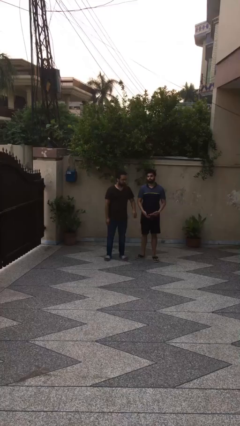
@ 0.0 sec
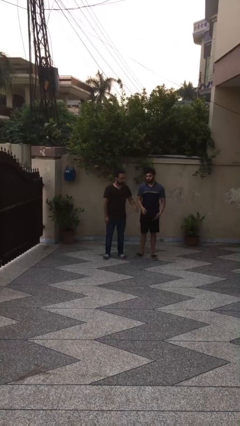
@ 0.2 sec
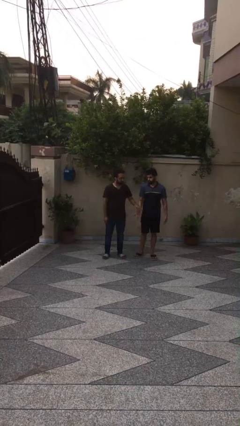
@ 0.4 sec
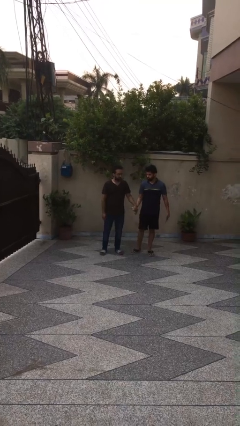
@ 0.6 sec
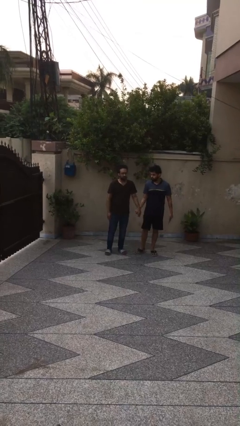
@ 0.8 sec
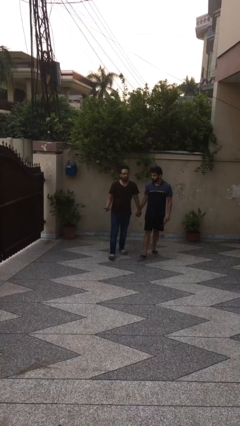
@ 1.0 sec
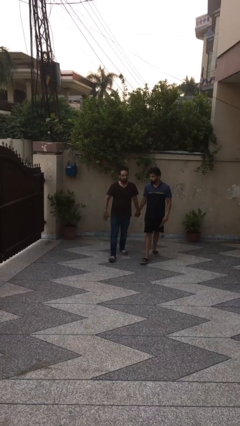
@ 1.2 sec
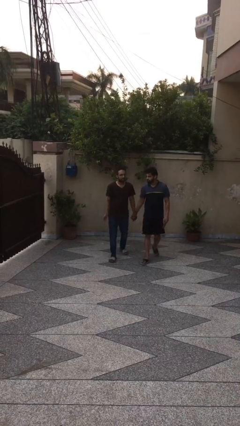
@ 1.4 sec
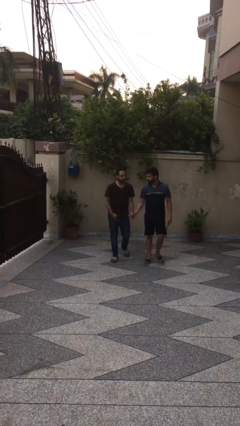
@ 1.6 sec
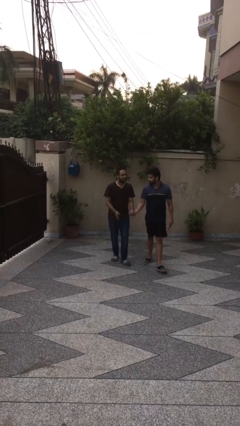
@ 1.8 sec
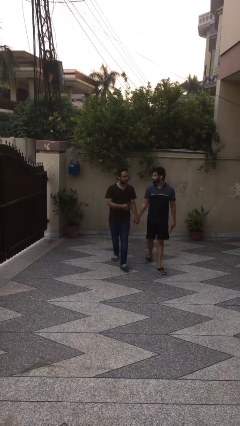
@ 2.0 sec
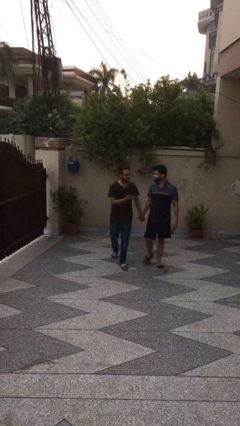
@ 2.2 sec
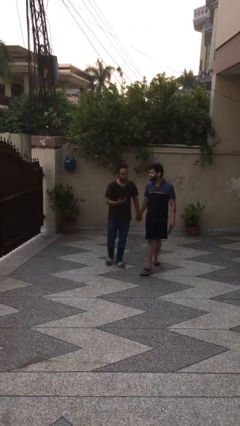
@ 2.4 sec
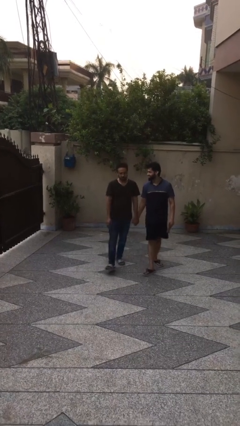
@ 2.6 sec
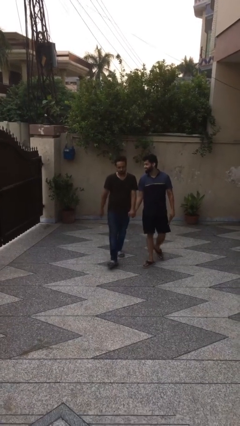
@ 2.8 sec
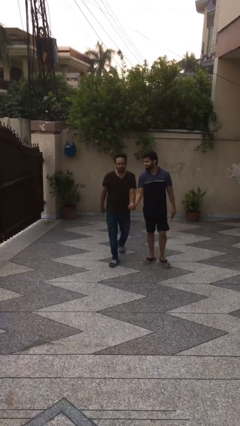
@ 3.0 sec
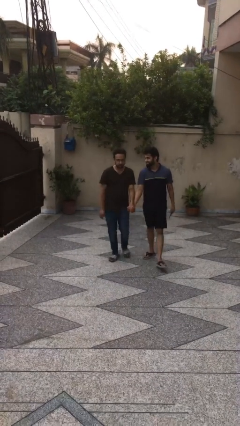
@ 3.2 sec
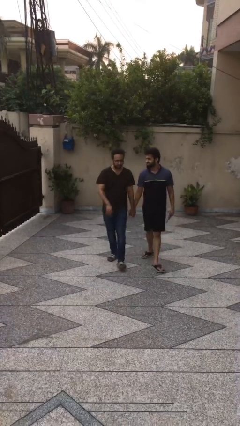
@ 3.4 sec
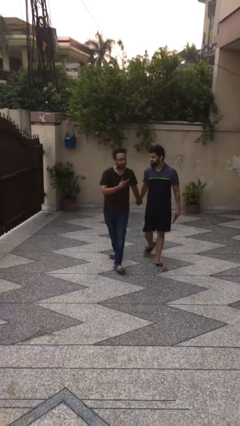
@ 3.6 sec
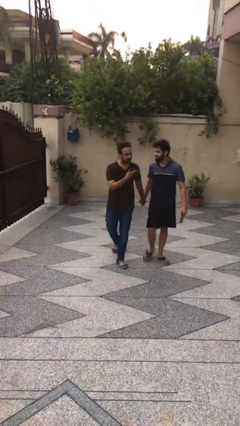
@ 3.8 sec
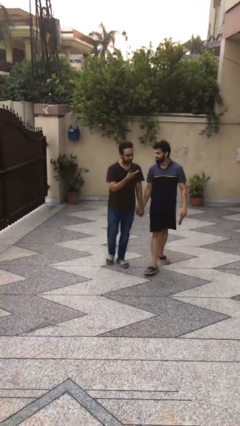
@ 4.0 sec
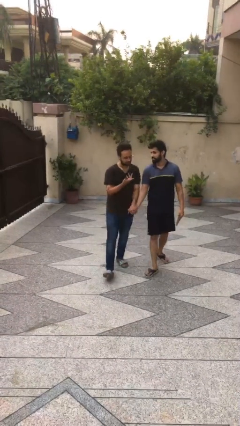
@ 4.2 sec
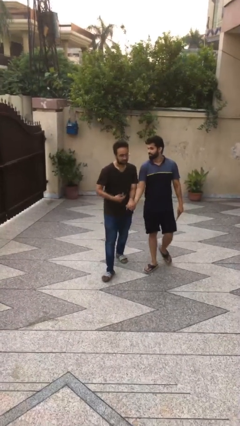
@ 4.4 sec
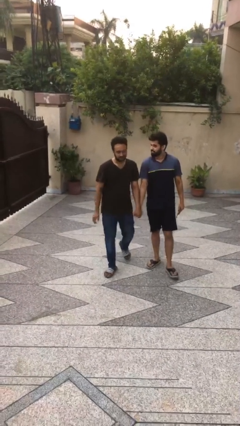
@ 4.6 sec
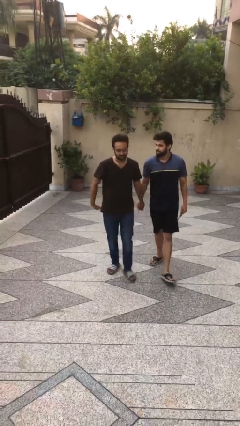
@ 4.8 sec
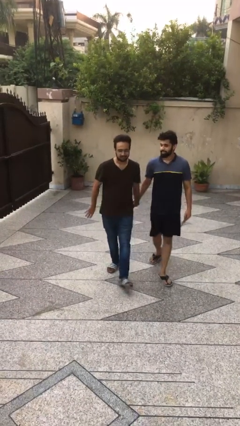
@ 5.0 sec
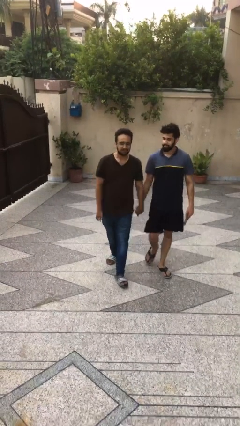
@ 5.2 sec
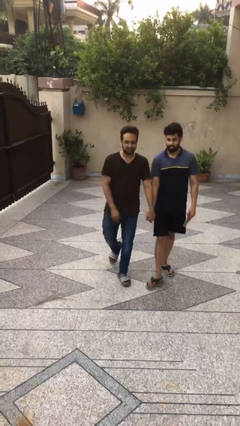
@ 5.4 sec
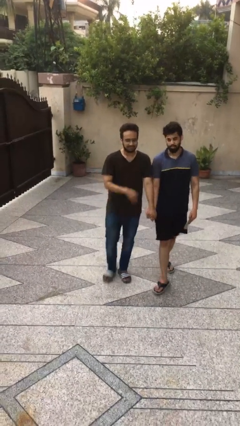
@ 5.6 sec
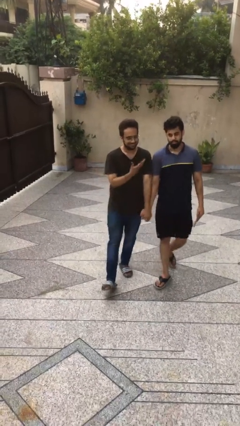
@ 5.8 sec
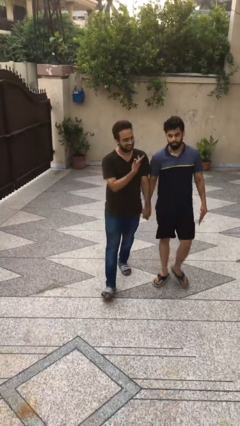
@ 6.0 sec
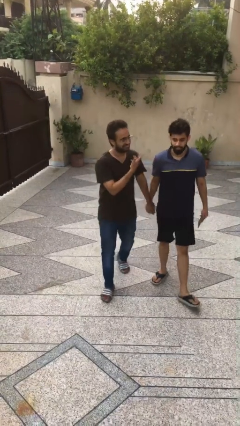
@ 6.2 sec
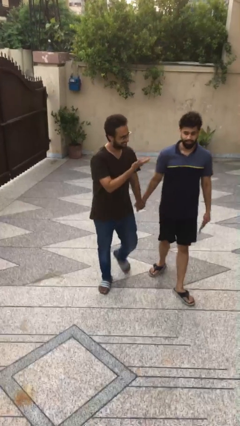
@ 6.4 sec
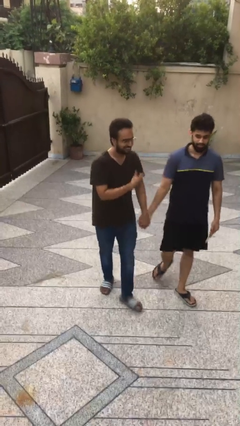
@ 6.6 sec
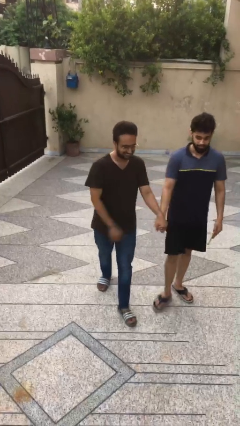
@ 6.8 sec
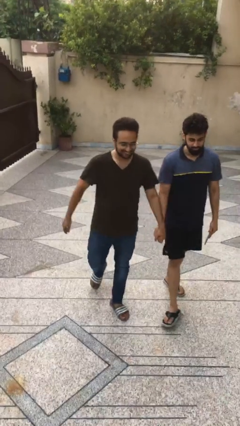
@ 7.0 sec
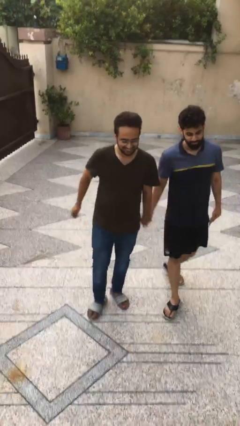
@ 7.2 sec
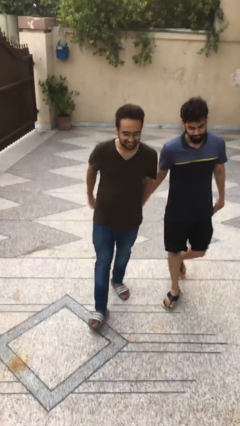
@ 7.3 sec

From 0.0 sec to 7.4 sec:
person holds hand

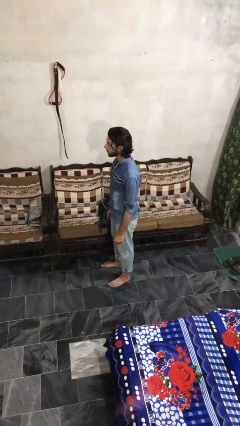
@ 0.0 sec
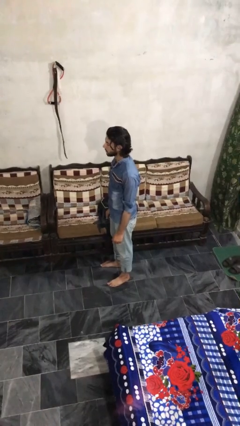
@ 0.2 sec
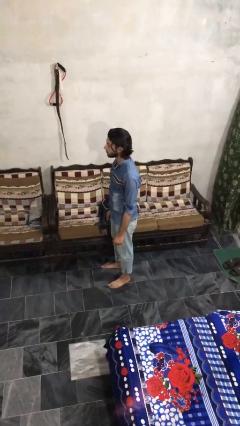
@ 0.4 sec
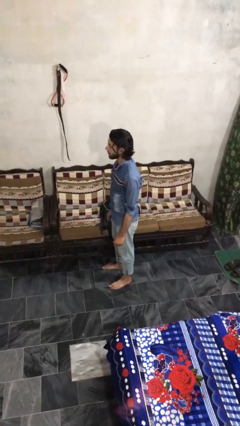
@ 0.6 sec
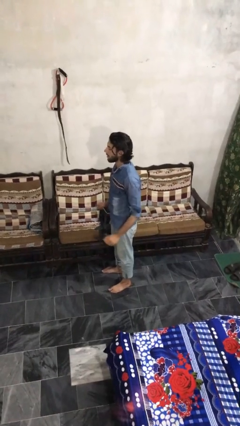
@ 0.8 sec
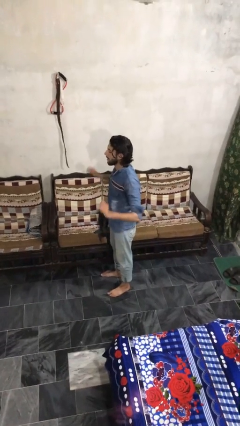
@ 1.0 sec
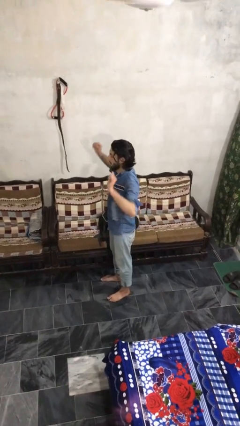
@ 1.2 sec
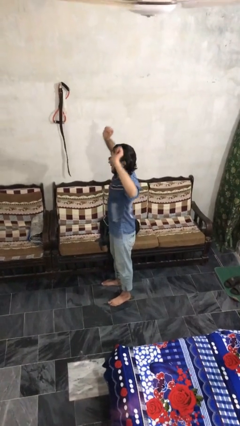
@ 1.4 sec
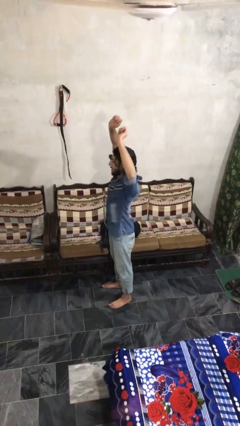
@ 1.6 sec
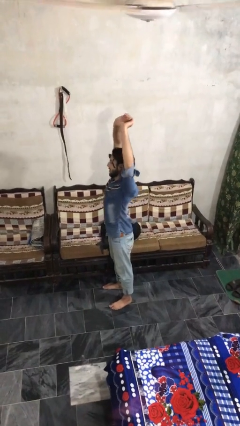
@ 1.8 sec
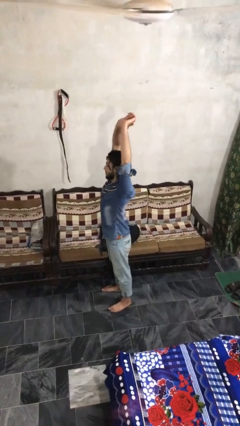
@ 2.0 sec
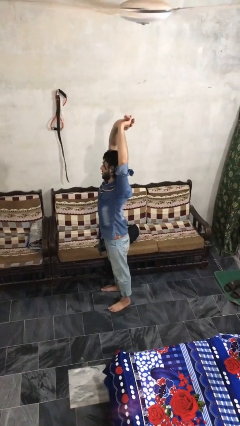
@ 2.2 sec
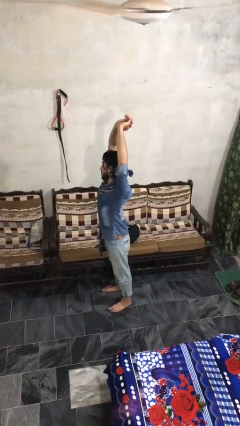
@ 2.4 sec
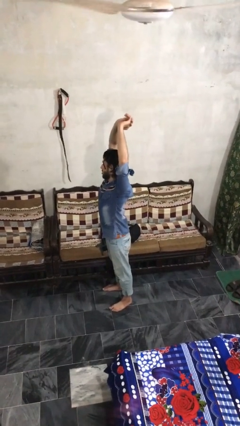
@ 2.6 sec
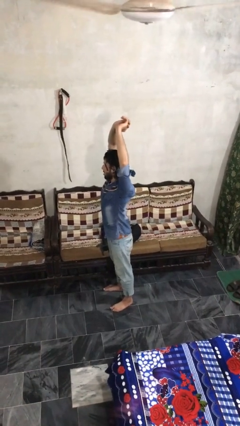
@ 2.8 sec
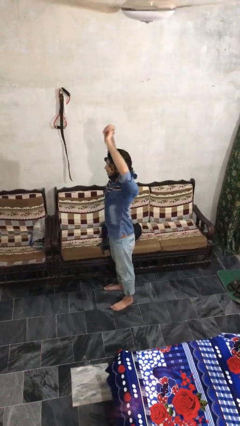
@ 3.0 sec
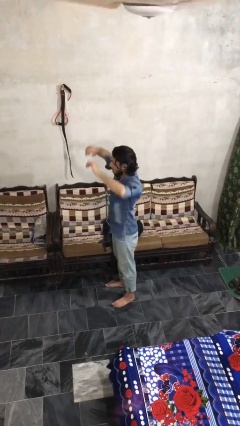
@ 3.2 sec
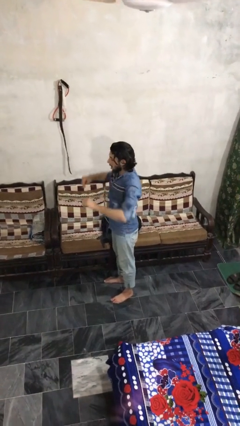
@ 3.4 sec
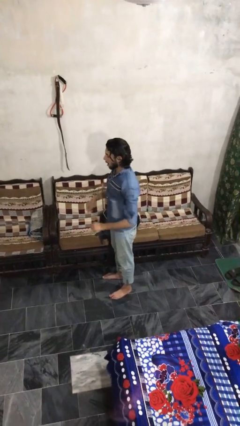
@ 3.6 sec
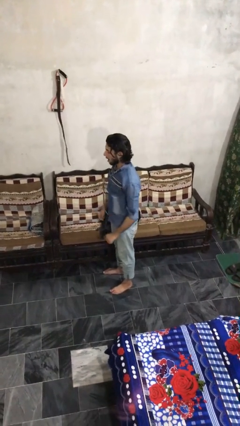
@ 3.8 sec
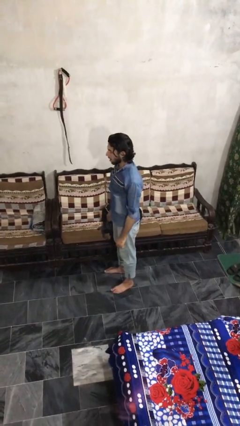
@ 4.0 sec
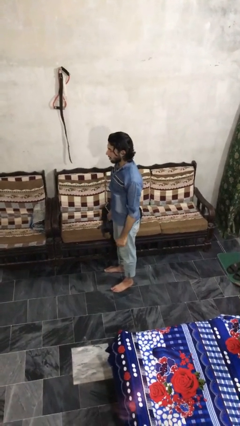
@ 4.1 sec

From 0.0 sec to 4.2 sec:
person stretches arms over head

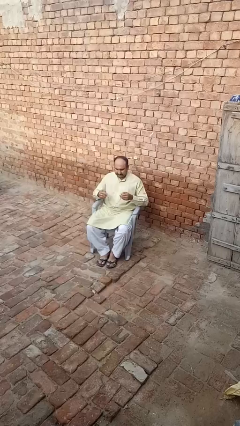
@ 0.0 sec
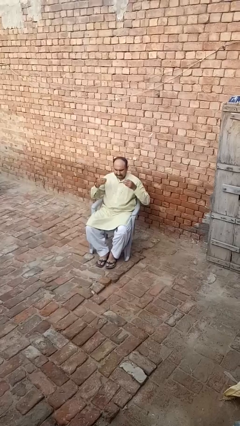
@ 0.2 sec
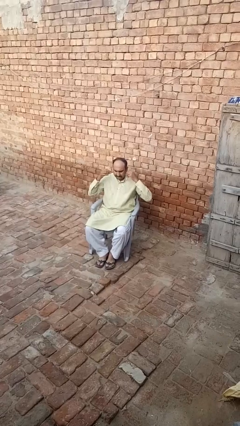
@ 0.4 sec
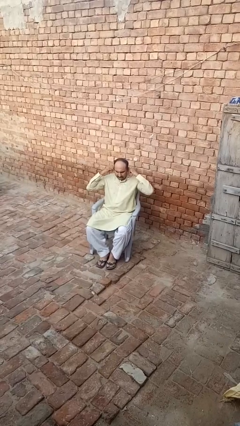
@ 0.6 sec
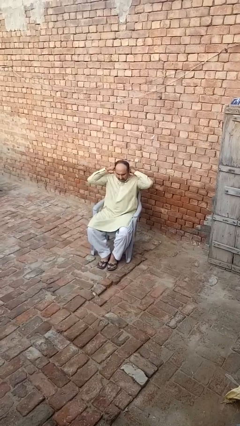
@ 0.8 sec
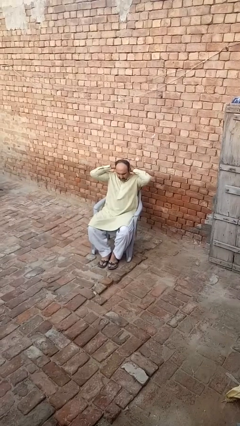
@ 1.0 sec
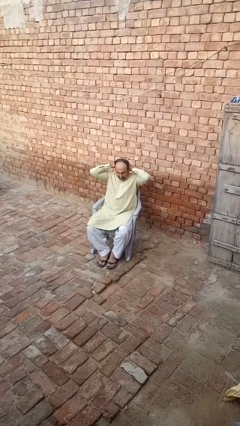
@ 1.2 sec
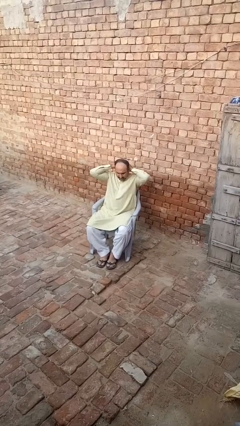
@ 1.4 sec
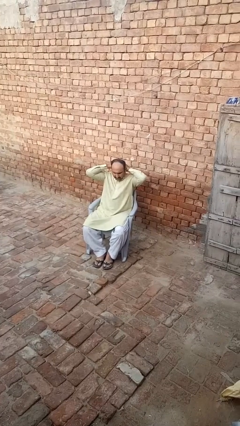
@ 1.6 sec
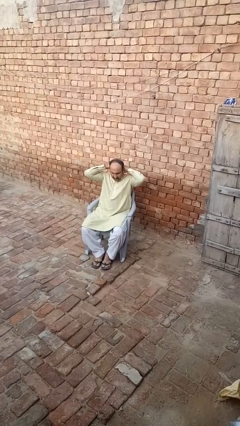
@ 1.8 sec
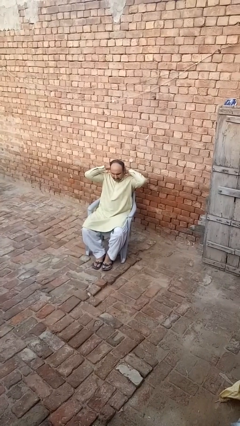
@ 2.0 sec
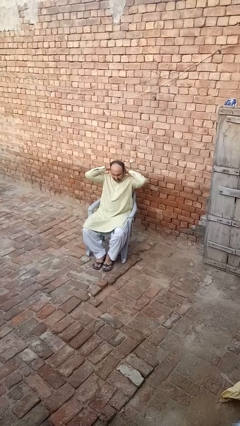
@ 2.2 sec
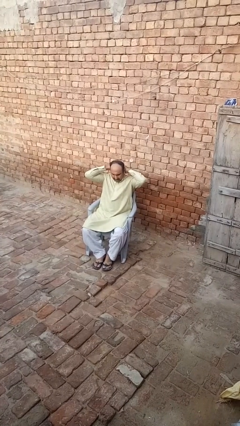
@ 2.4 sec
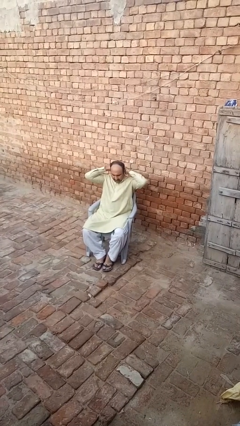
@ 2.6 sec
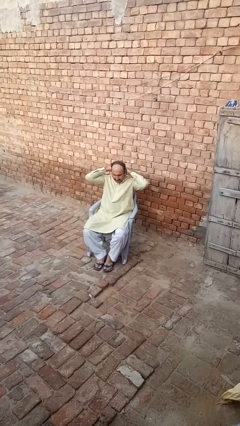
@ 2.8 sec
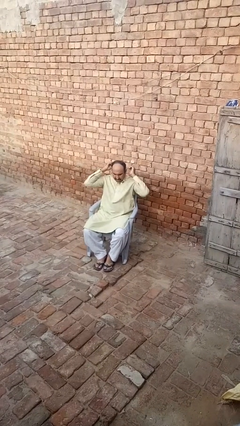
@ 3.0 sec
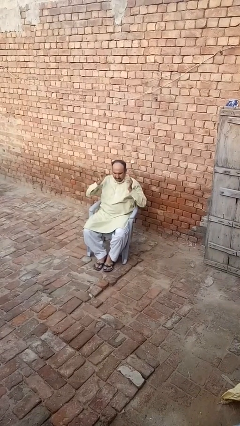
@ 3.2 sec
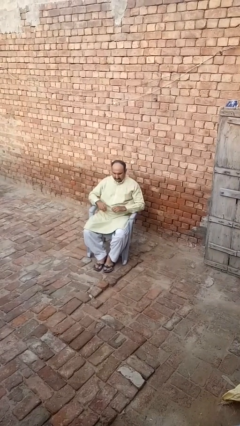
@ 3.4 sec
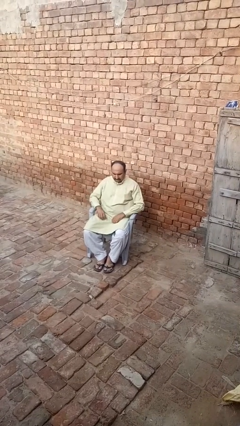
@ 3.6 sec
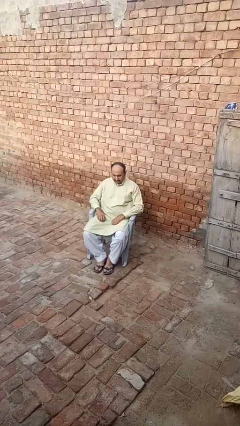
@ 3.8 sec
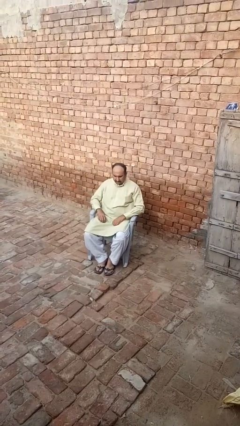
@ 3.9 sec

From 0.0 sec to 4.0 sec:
person puts on necklace

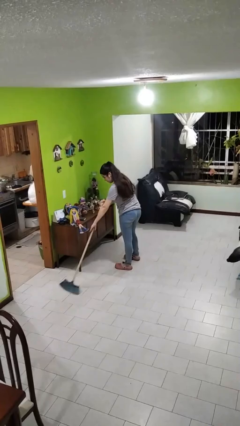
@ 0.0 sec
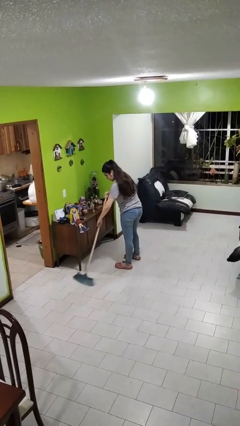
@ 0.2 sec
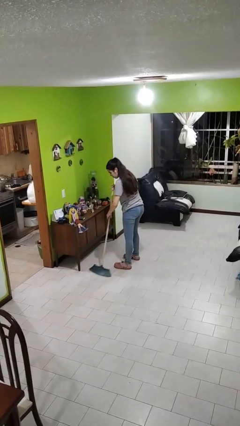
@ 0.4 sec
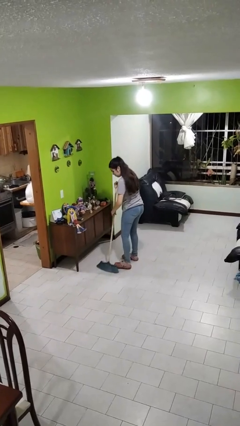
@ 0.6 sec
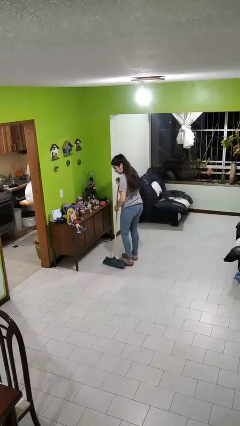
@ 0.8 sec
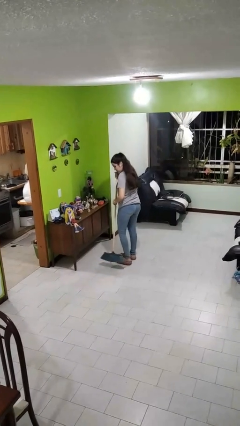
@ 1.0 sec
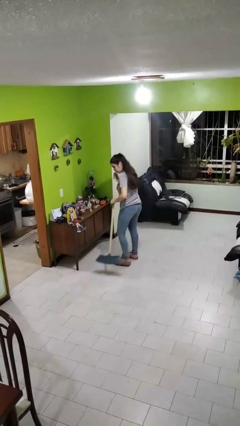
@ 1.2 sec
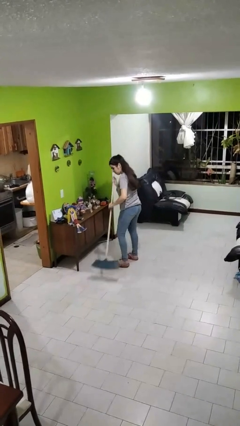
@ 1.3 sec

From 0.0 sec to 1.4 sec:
person sweeps floor

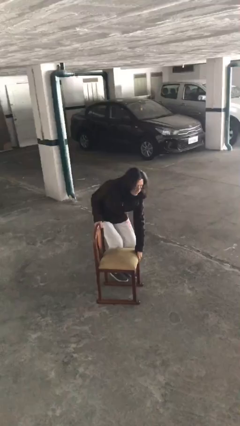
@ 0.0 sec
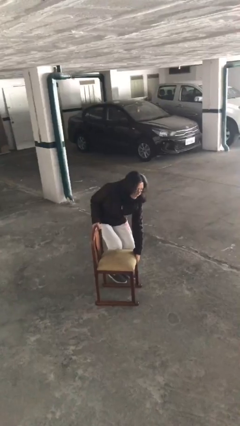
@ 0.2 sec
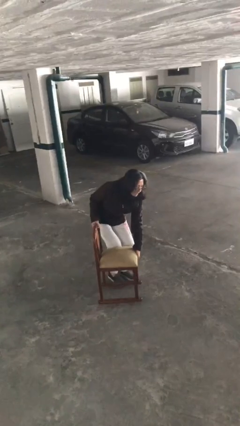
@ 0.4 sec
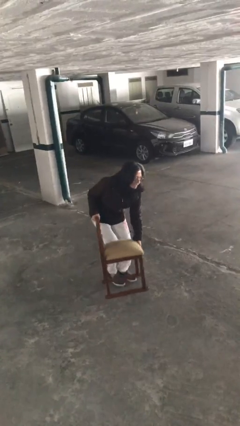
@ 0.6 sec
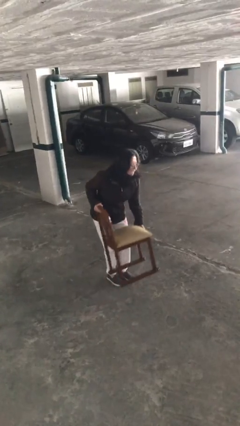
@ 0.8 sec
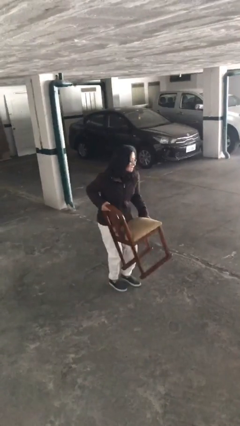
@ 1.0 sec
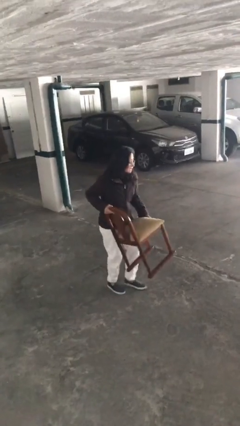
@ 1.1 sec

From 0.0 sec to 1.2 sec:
person picks up object from floor
